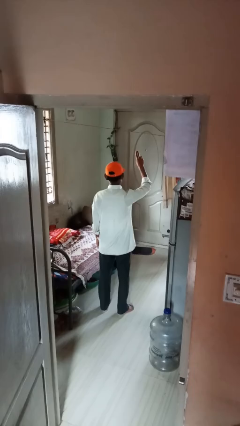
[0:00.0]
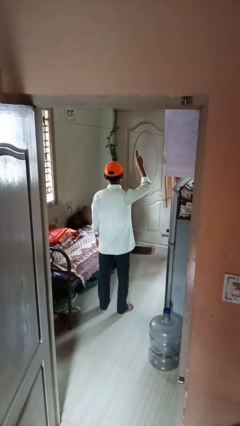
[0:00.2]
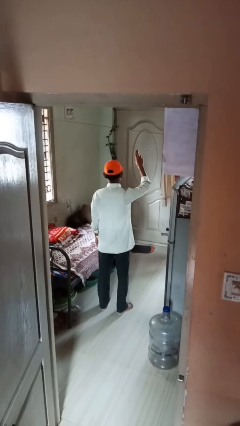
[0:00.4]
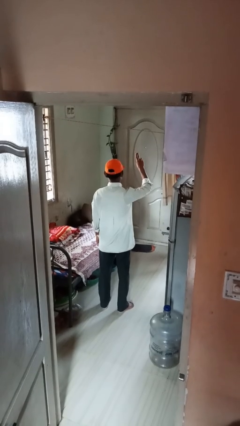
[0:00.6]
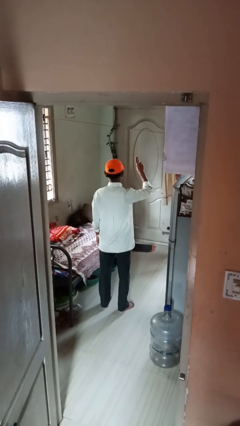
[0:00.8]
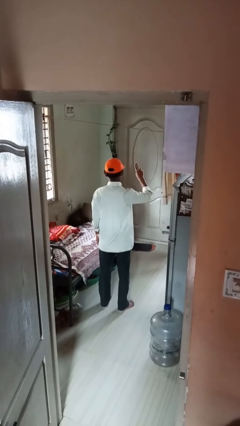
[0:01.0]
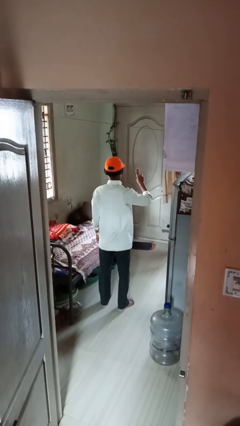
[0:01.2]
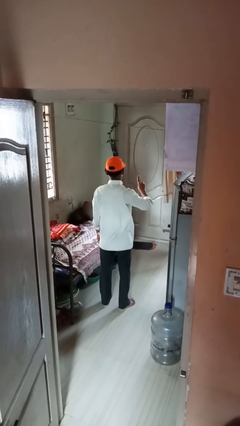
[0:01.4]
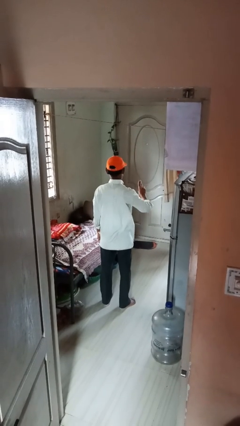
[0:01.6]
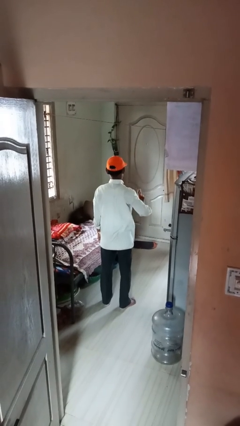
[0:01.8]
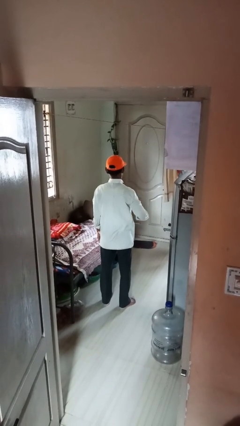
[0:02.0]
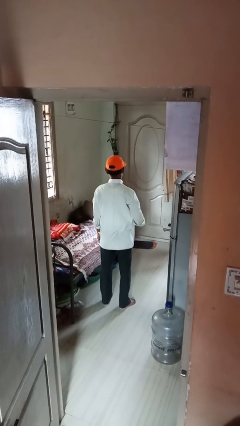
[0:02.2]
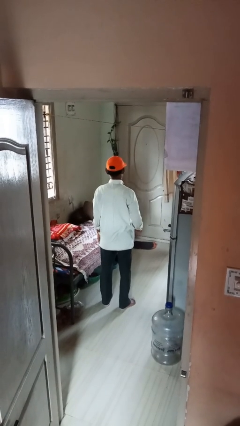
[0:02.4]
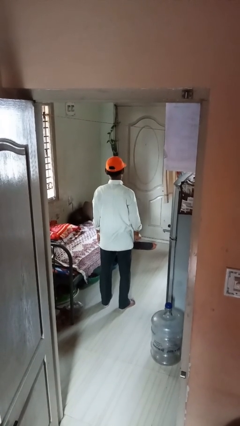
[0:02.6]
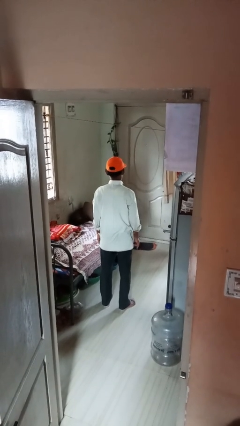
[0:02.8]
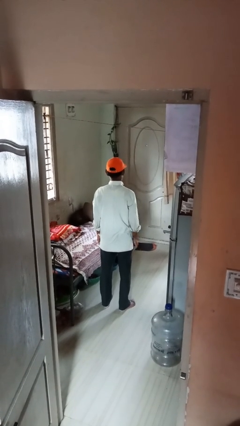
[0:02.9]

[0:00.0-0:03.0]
person gestures swipe down

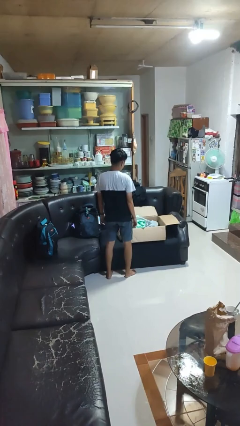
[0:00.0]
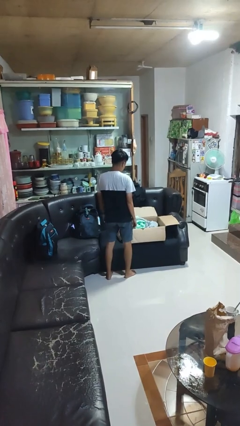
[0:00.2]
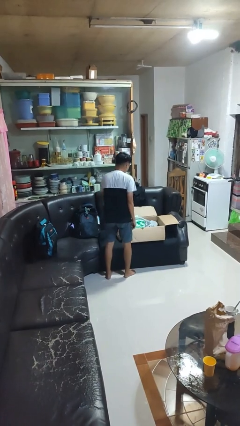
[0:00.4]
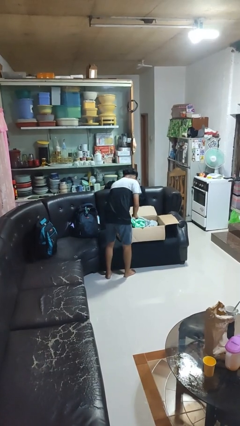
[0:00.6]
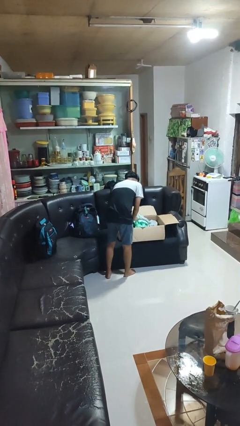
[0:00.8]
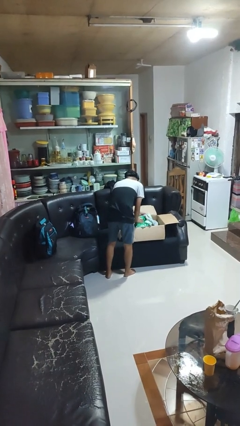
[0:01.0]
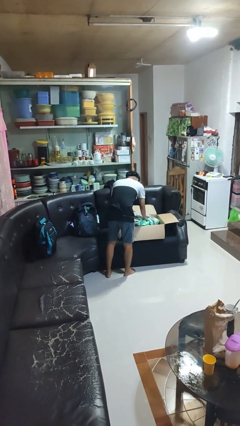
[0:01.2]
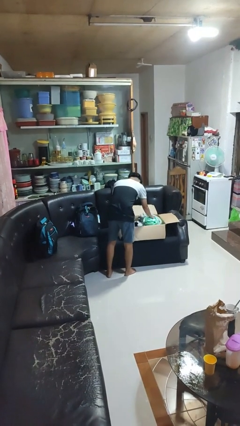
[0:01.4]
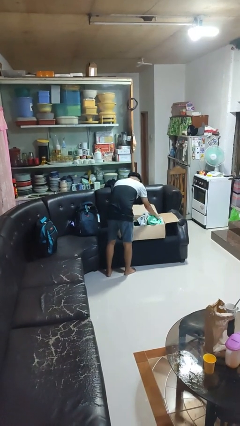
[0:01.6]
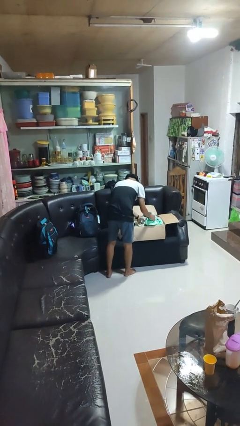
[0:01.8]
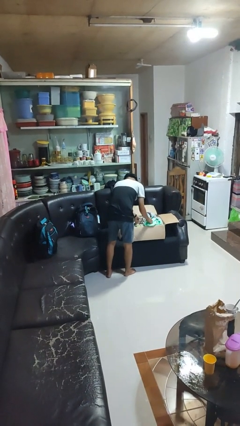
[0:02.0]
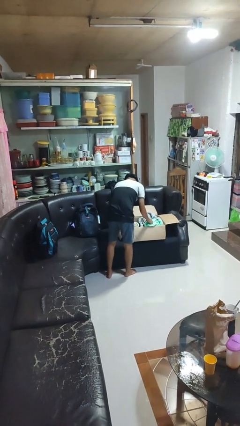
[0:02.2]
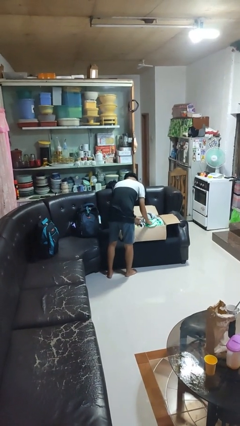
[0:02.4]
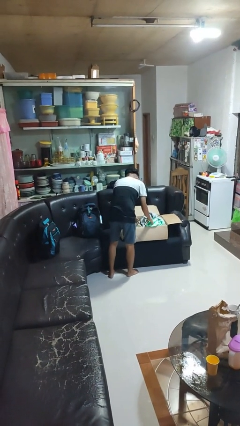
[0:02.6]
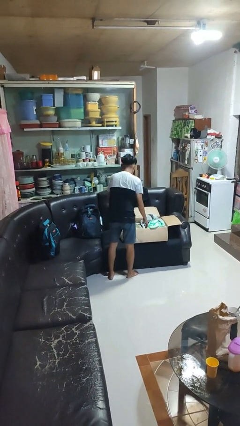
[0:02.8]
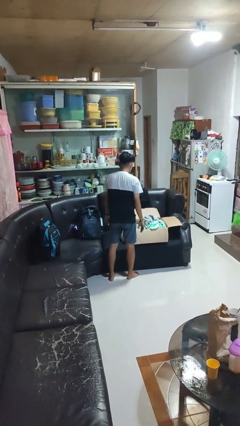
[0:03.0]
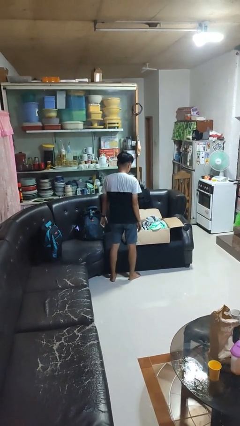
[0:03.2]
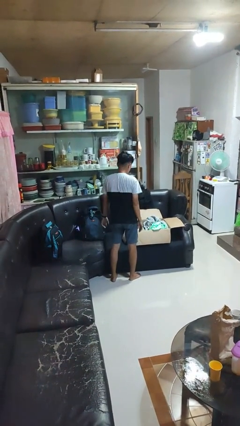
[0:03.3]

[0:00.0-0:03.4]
person searches in box

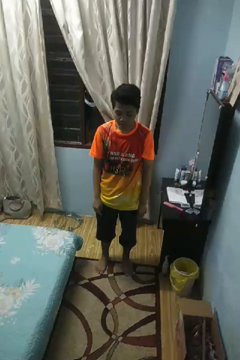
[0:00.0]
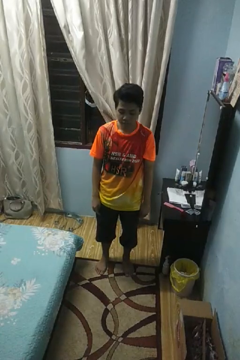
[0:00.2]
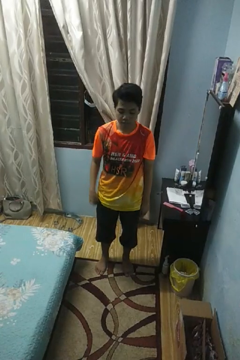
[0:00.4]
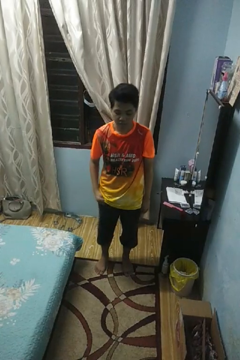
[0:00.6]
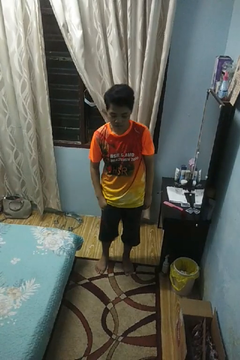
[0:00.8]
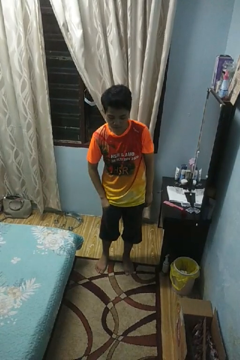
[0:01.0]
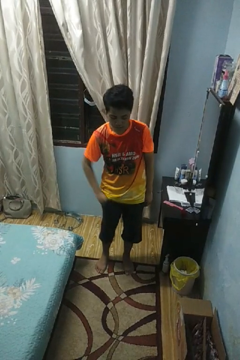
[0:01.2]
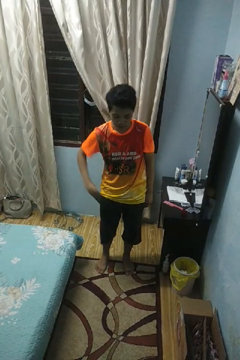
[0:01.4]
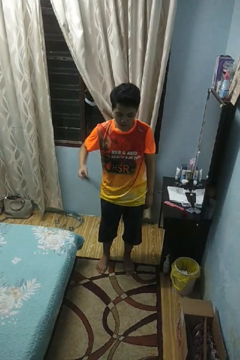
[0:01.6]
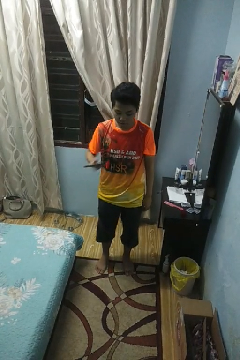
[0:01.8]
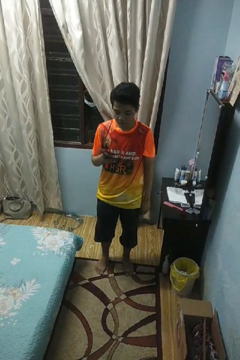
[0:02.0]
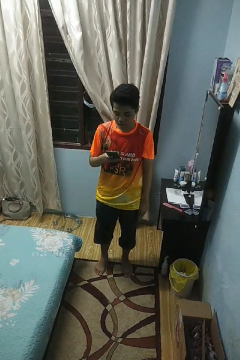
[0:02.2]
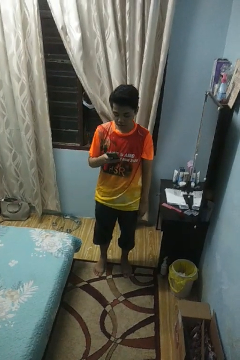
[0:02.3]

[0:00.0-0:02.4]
person takes phone from pocket

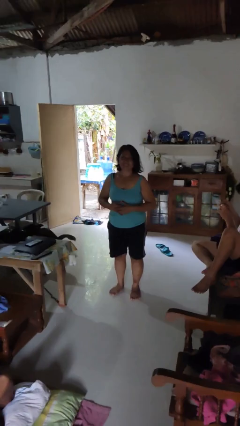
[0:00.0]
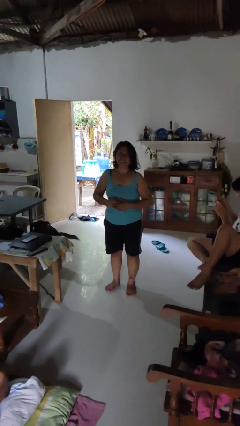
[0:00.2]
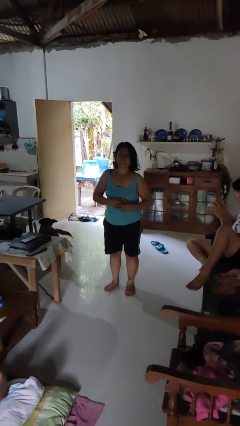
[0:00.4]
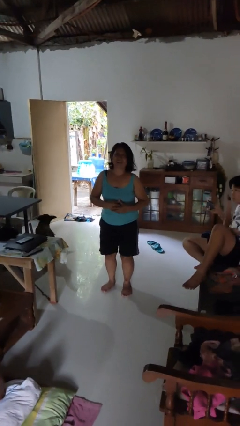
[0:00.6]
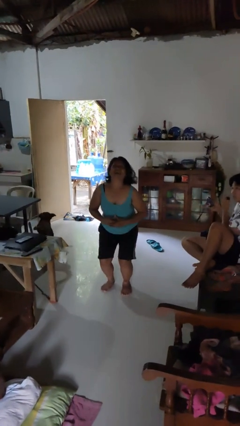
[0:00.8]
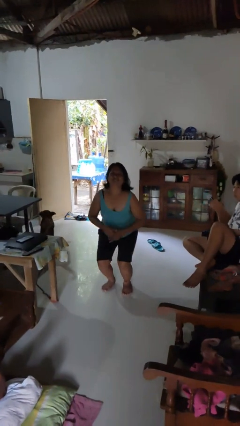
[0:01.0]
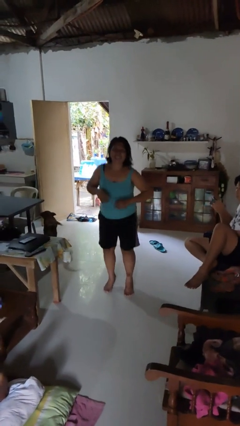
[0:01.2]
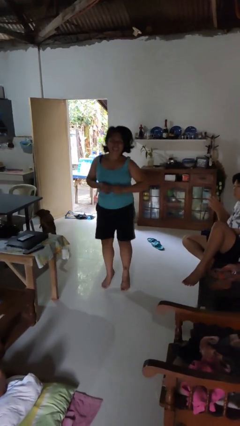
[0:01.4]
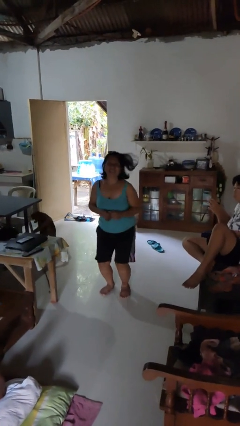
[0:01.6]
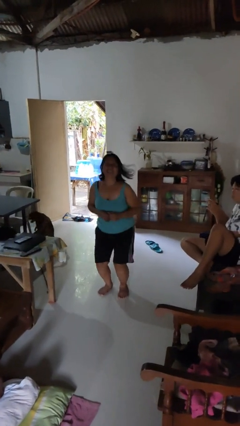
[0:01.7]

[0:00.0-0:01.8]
person jumps

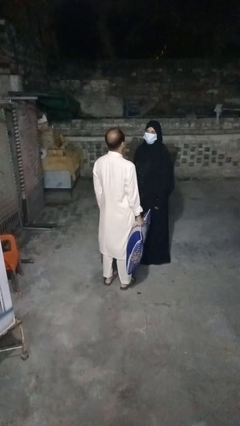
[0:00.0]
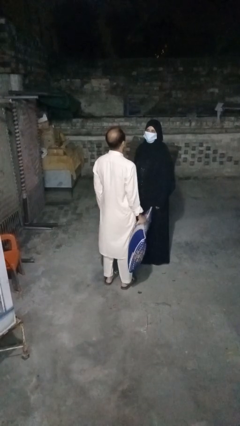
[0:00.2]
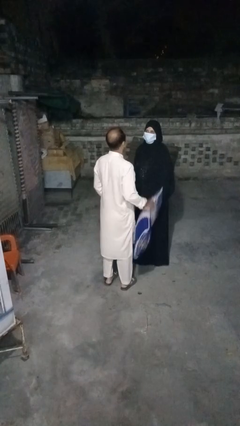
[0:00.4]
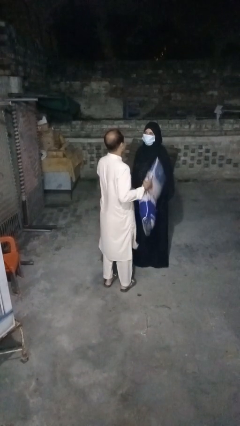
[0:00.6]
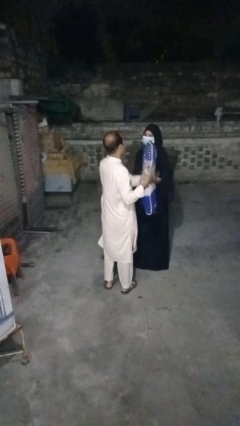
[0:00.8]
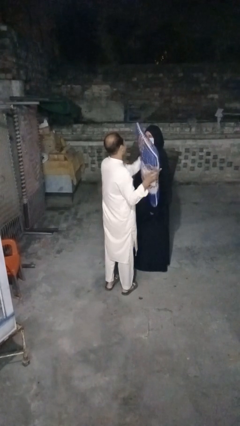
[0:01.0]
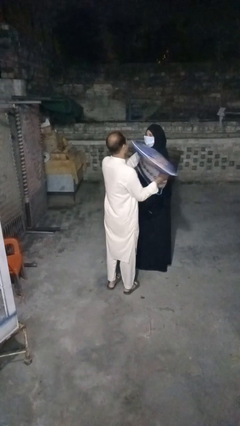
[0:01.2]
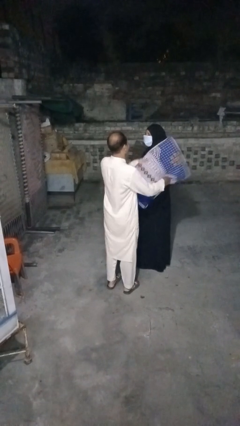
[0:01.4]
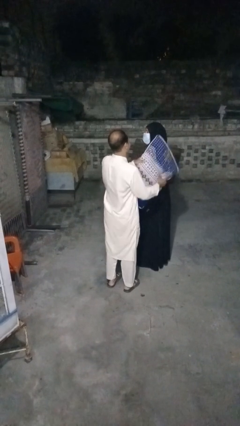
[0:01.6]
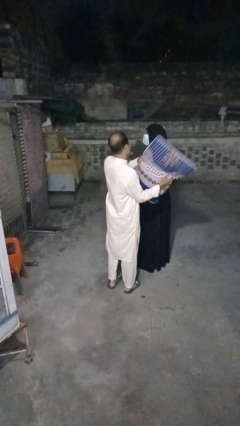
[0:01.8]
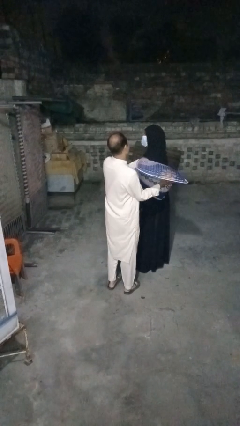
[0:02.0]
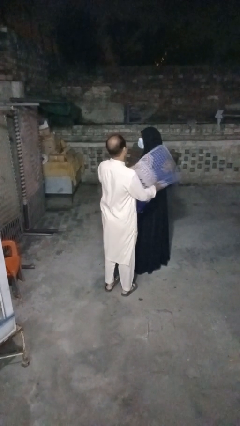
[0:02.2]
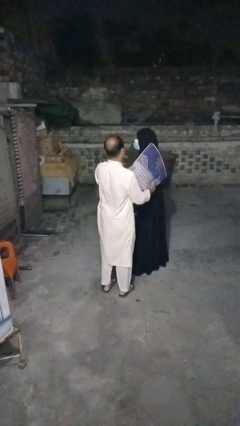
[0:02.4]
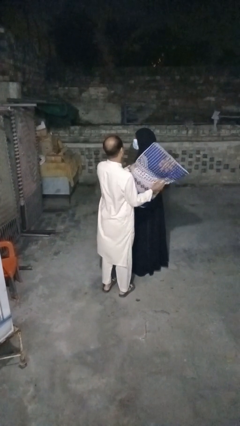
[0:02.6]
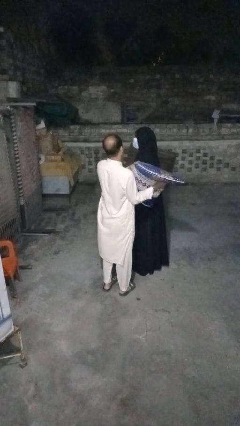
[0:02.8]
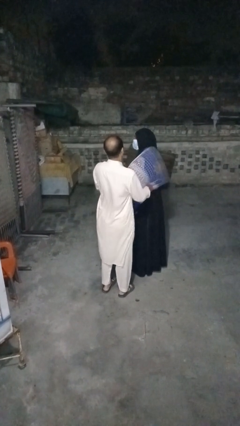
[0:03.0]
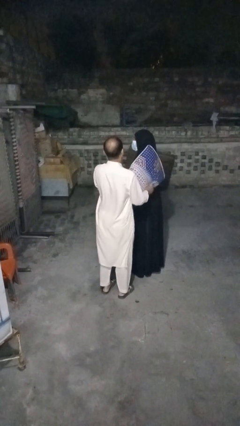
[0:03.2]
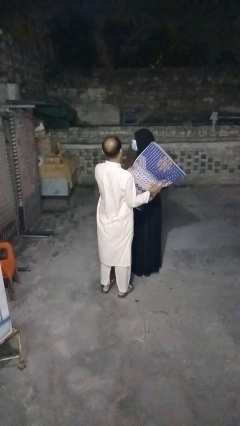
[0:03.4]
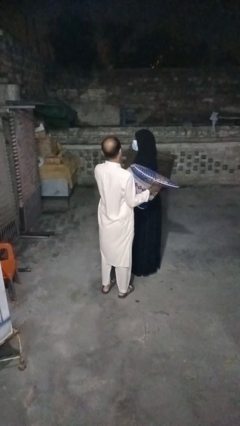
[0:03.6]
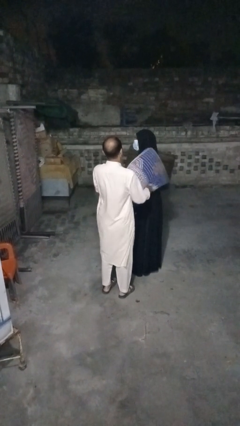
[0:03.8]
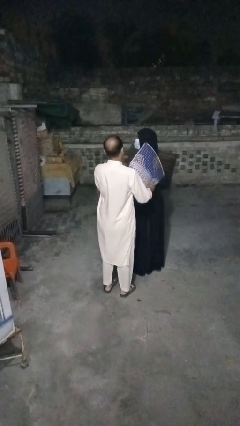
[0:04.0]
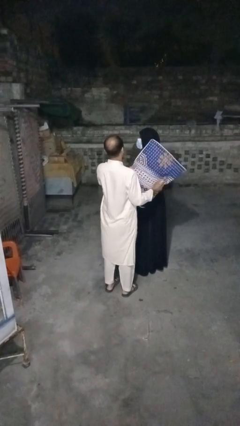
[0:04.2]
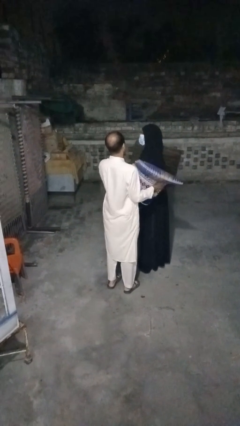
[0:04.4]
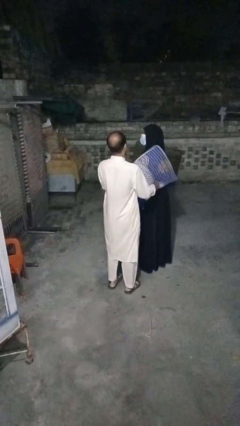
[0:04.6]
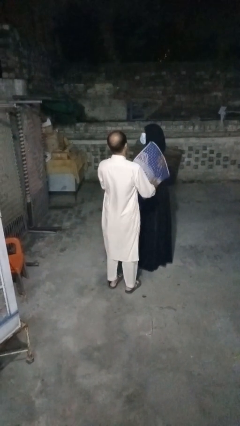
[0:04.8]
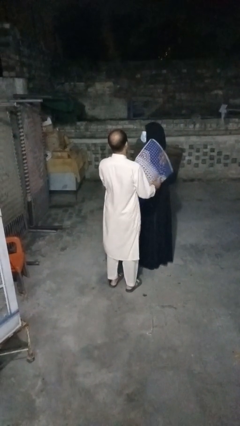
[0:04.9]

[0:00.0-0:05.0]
person hits person with pillow

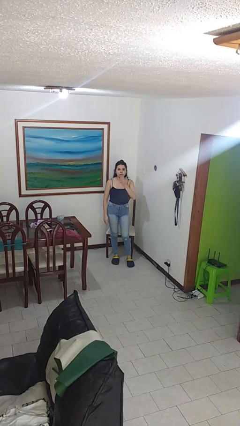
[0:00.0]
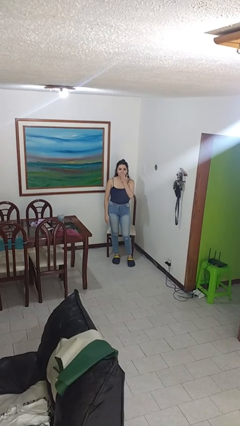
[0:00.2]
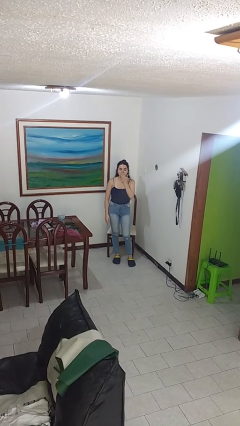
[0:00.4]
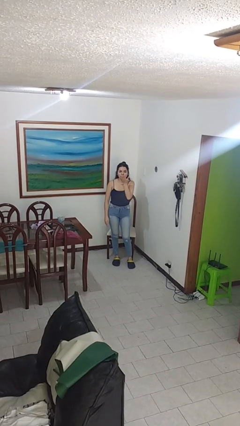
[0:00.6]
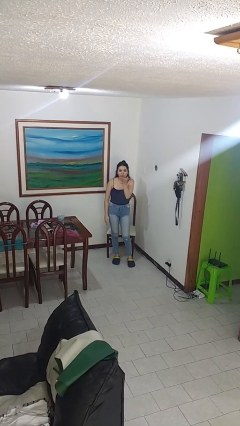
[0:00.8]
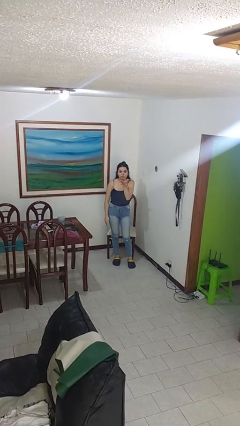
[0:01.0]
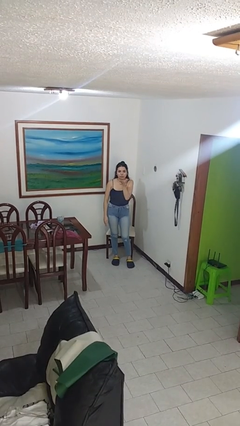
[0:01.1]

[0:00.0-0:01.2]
person gestures blow kiss

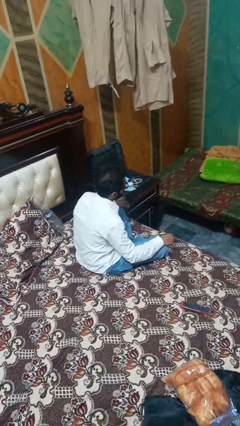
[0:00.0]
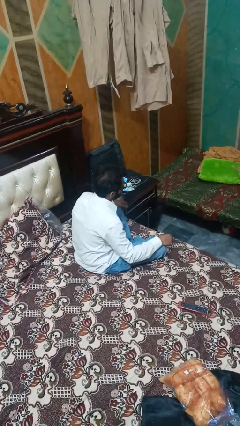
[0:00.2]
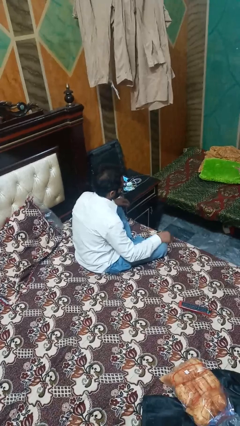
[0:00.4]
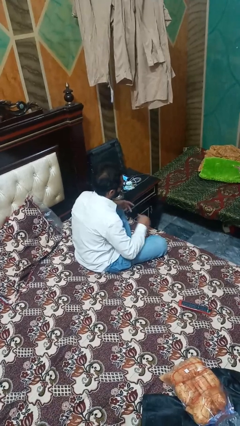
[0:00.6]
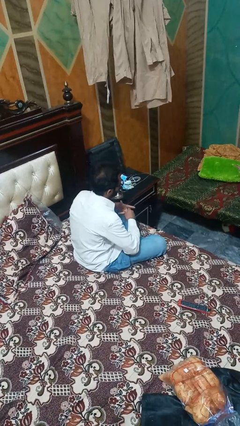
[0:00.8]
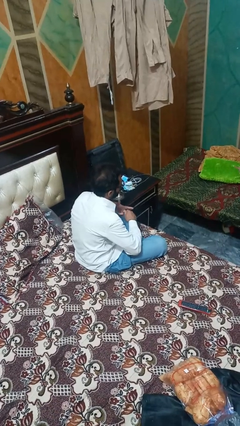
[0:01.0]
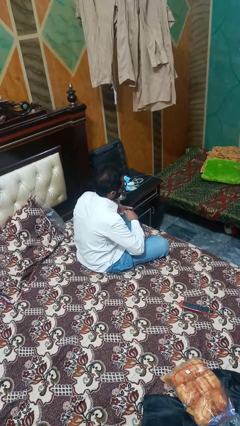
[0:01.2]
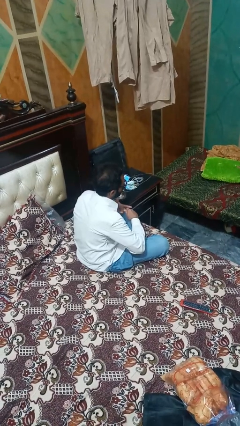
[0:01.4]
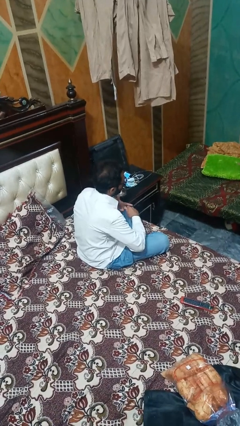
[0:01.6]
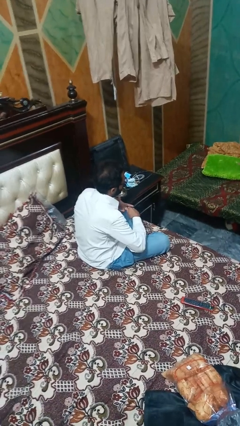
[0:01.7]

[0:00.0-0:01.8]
person snaps fingers
